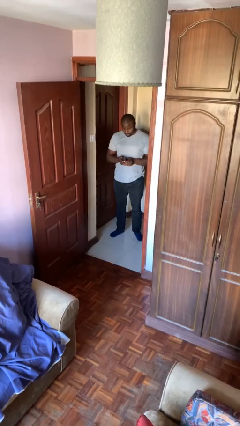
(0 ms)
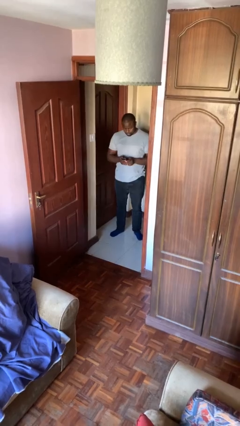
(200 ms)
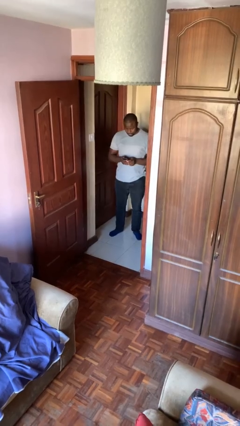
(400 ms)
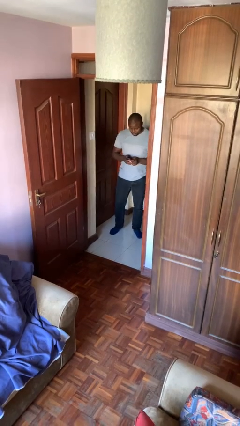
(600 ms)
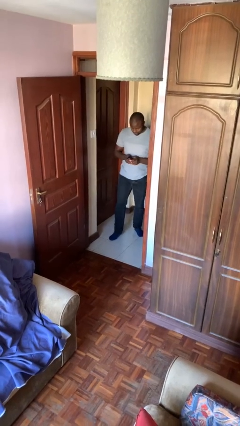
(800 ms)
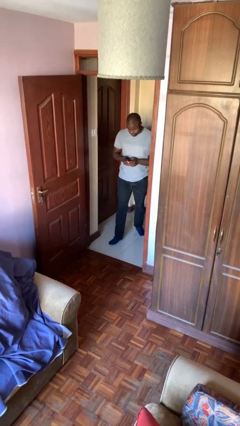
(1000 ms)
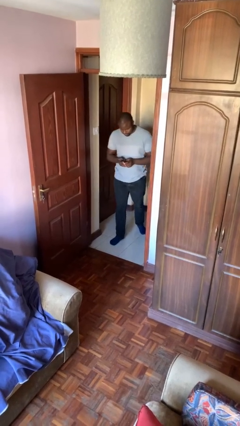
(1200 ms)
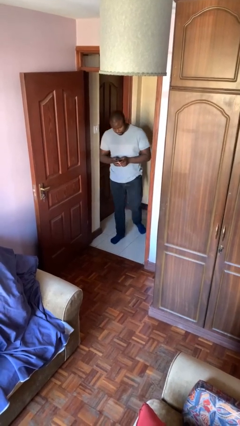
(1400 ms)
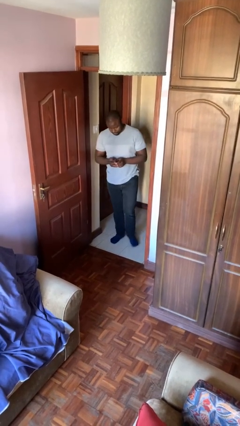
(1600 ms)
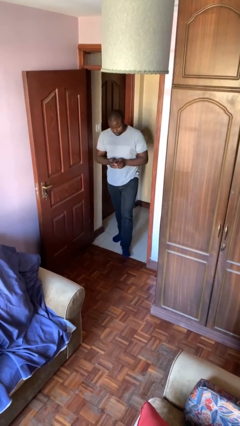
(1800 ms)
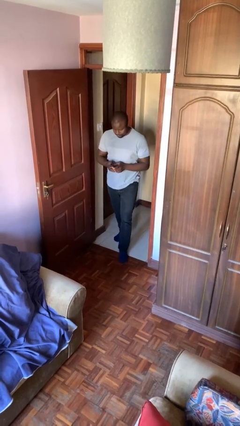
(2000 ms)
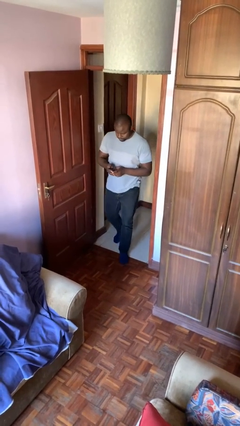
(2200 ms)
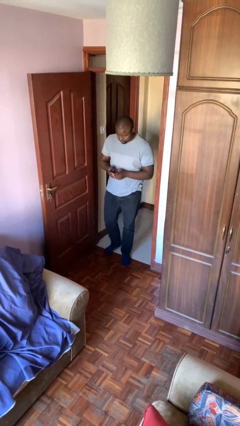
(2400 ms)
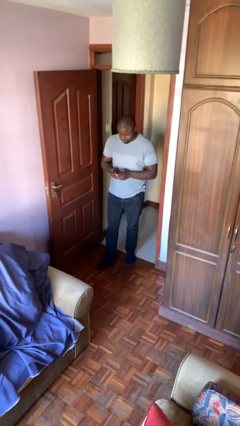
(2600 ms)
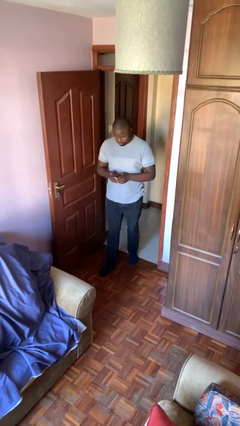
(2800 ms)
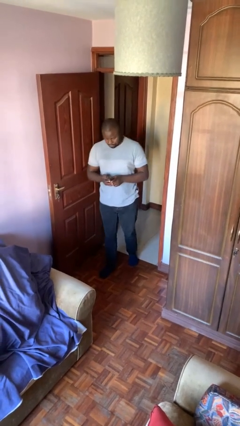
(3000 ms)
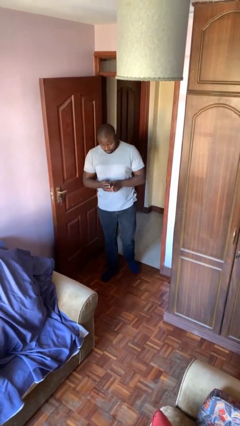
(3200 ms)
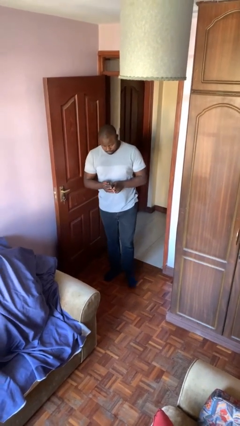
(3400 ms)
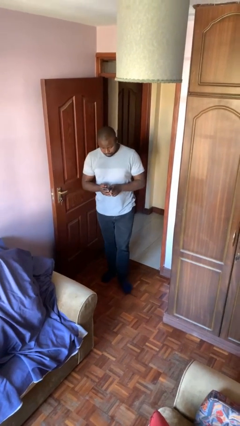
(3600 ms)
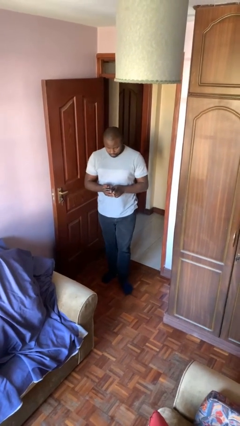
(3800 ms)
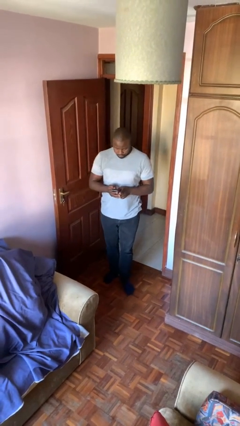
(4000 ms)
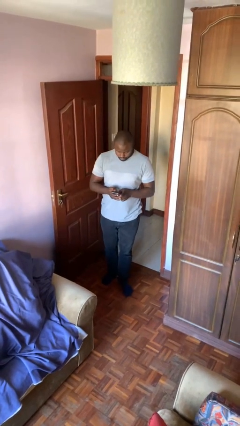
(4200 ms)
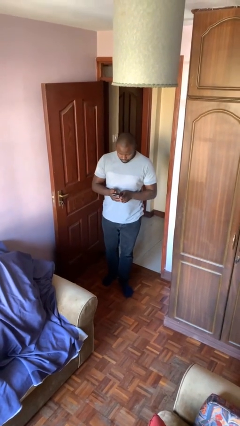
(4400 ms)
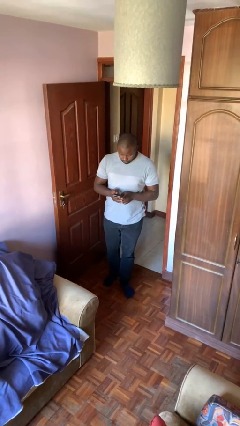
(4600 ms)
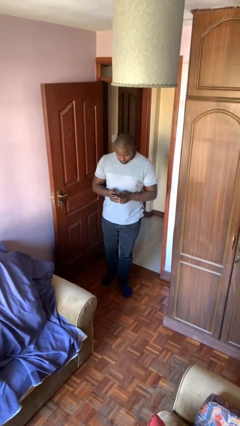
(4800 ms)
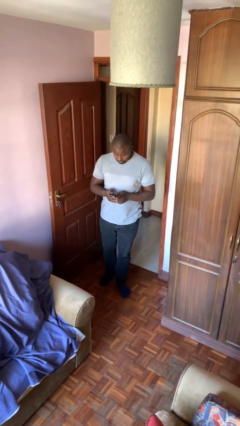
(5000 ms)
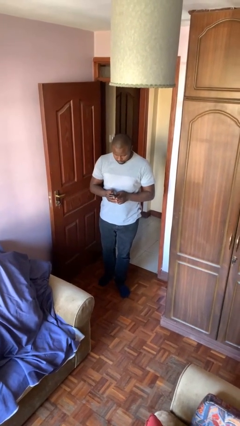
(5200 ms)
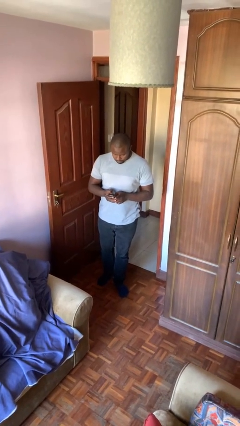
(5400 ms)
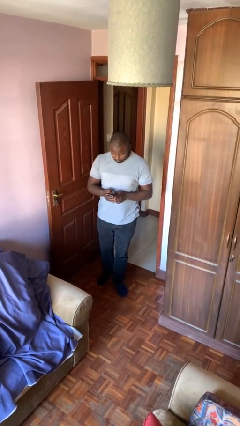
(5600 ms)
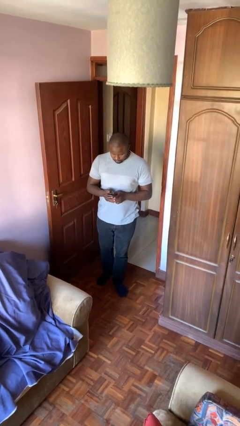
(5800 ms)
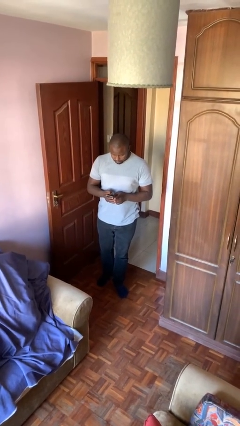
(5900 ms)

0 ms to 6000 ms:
person enters scene through structure

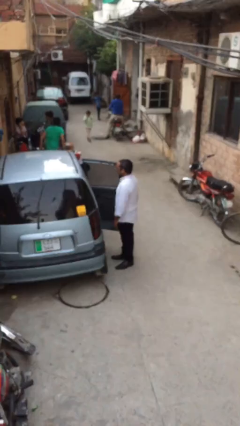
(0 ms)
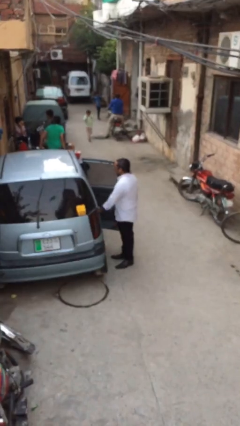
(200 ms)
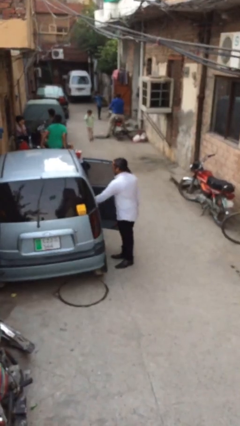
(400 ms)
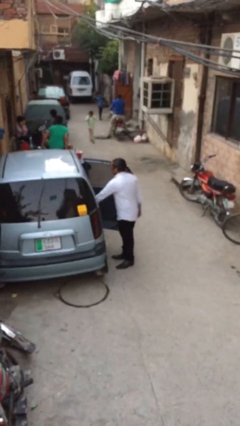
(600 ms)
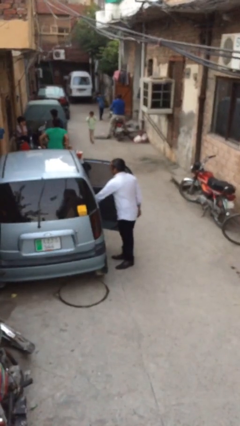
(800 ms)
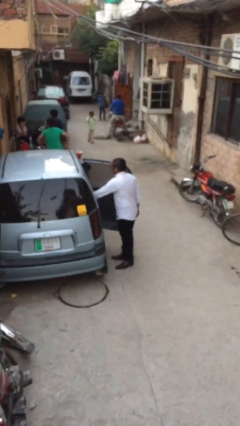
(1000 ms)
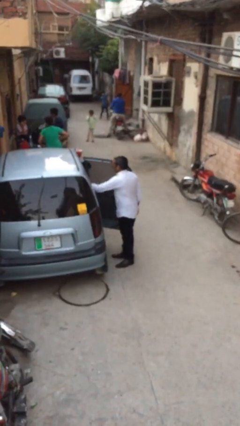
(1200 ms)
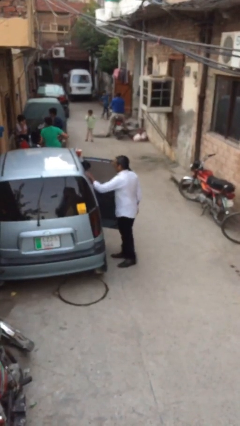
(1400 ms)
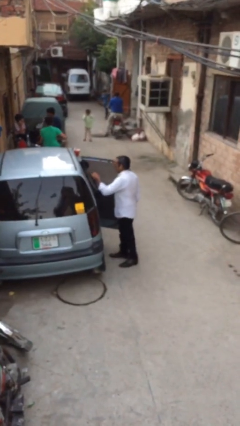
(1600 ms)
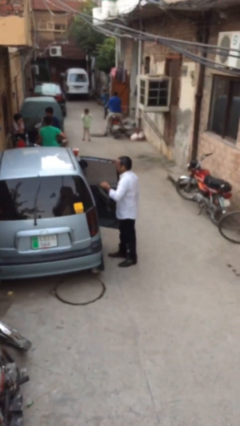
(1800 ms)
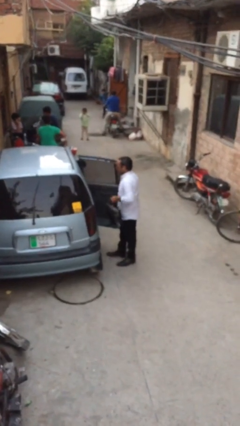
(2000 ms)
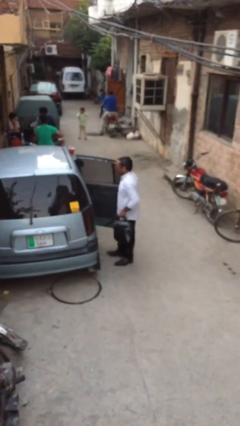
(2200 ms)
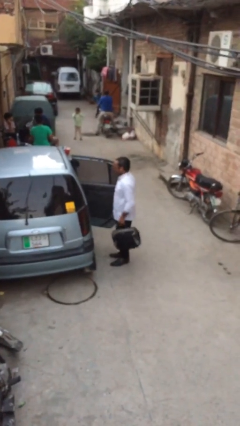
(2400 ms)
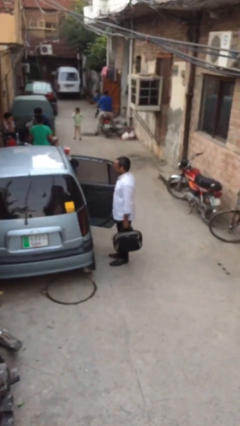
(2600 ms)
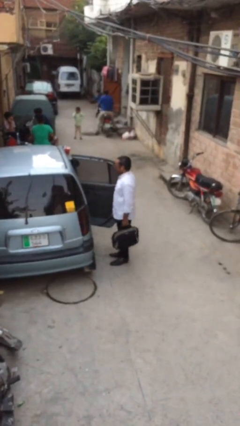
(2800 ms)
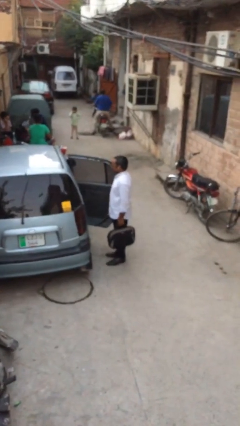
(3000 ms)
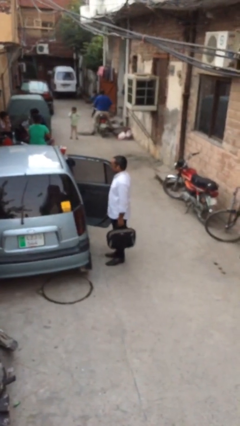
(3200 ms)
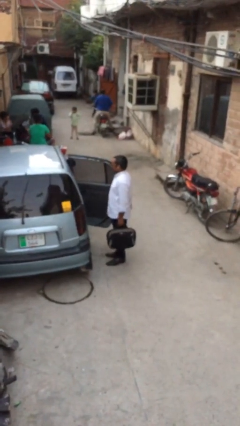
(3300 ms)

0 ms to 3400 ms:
person unloads car

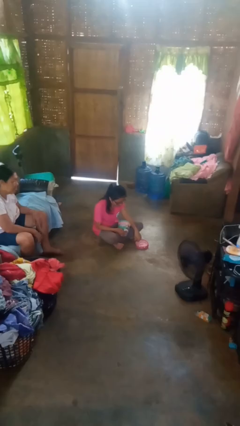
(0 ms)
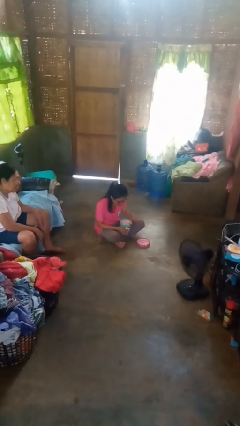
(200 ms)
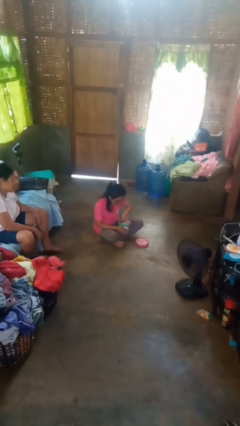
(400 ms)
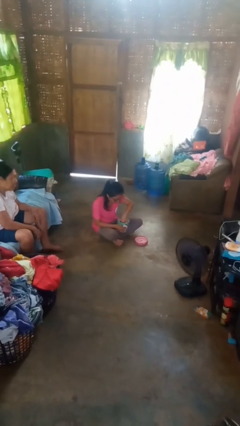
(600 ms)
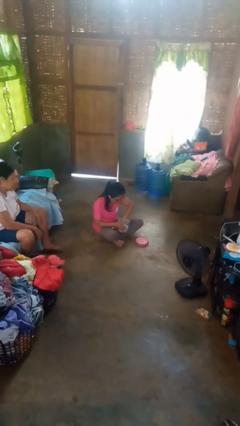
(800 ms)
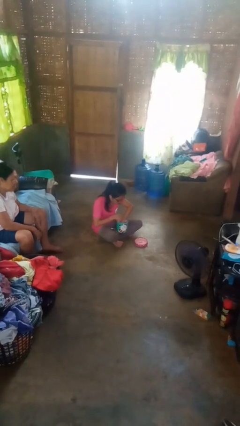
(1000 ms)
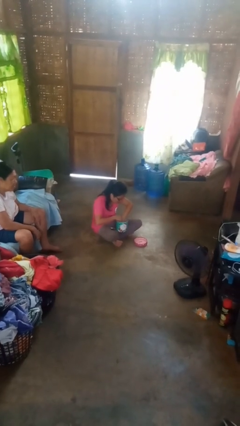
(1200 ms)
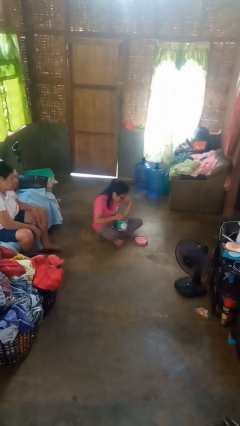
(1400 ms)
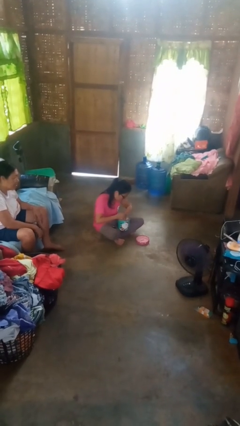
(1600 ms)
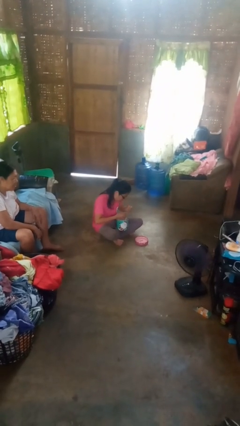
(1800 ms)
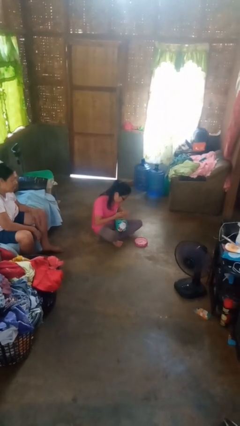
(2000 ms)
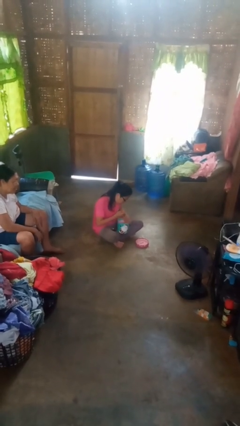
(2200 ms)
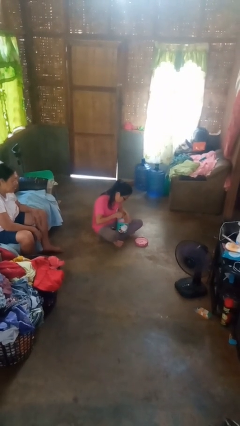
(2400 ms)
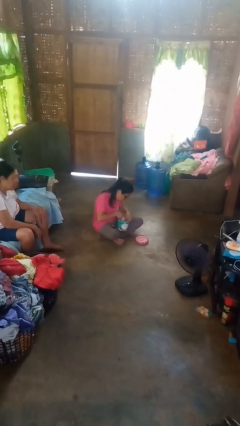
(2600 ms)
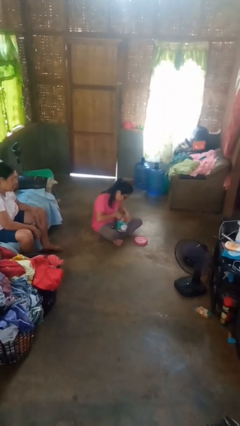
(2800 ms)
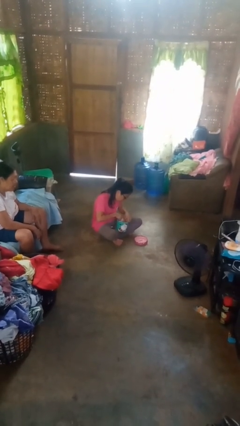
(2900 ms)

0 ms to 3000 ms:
person searches jewelry box

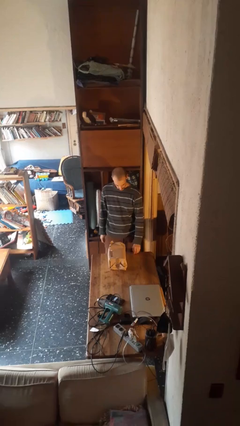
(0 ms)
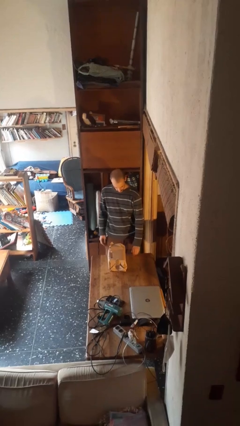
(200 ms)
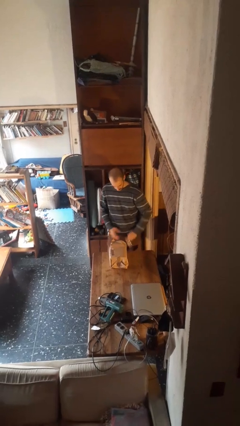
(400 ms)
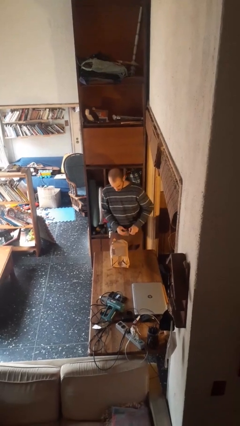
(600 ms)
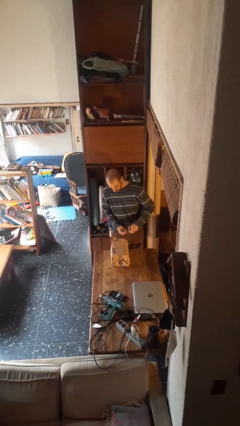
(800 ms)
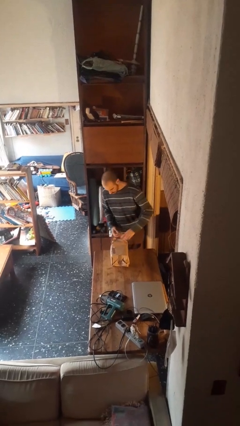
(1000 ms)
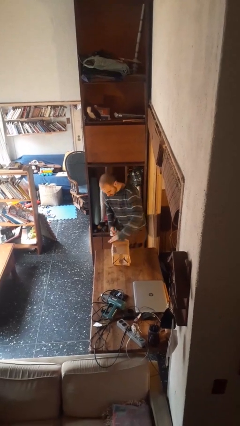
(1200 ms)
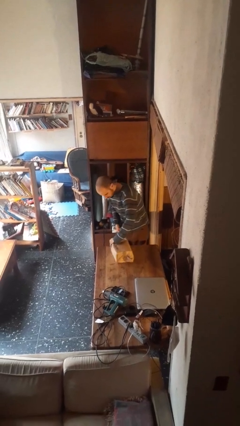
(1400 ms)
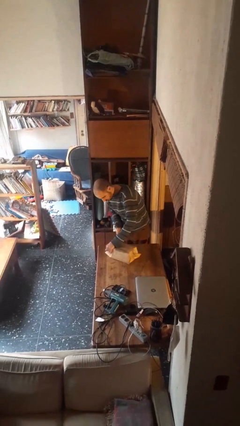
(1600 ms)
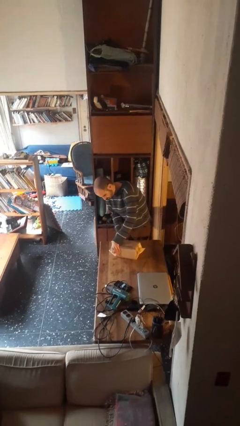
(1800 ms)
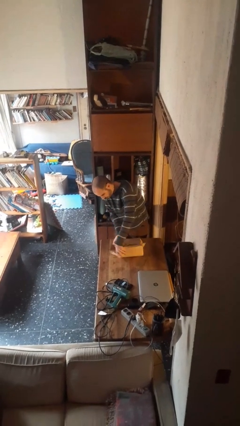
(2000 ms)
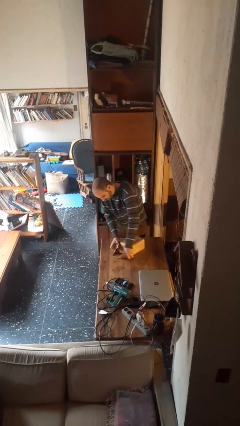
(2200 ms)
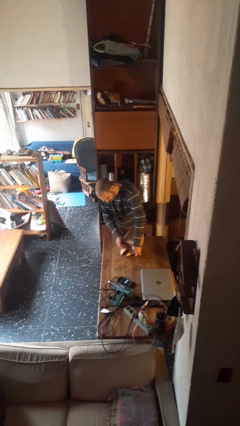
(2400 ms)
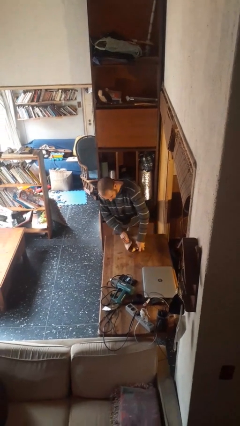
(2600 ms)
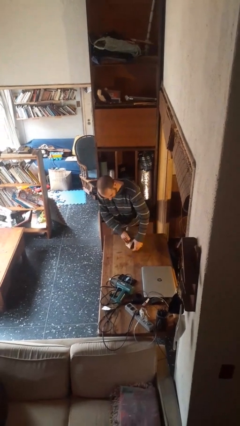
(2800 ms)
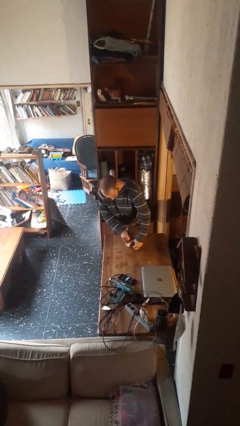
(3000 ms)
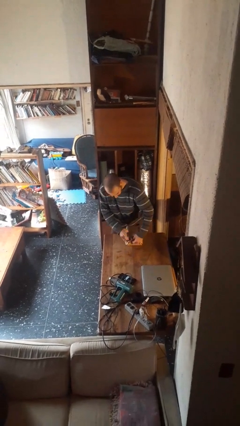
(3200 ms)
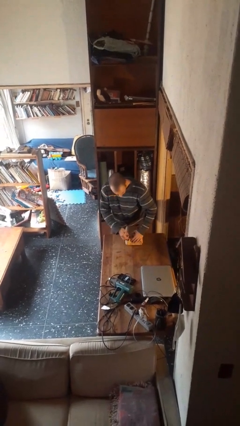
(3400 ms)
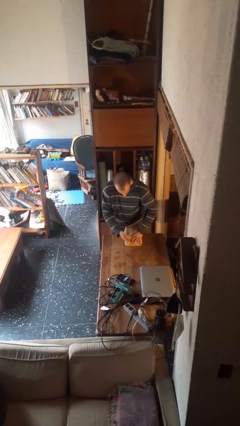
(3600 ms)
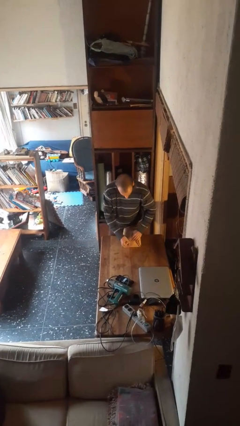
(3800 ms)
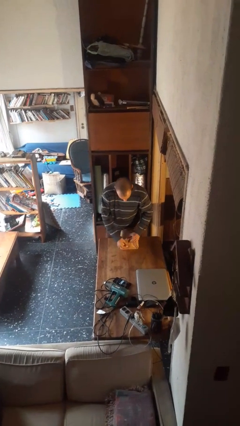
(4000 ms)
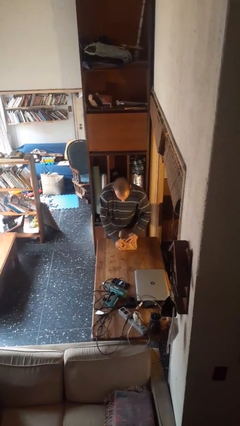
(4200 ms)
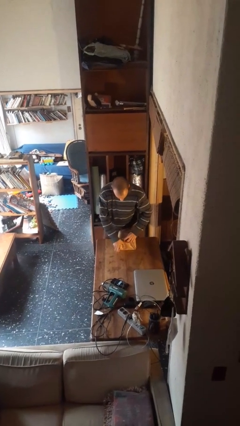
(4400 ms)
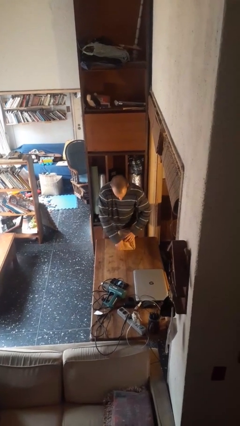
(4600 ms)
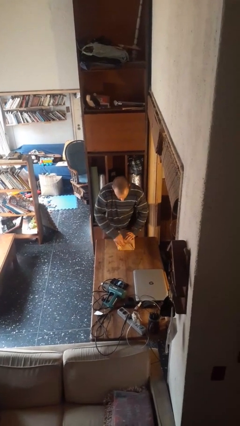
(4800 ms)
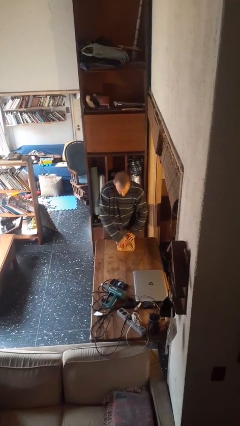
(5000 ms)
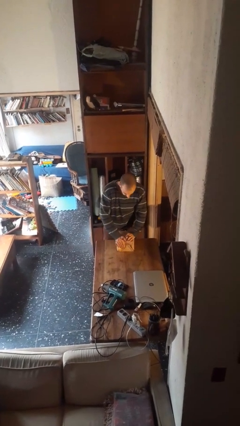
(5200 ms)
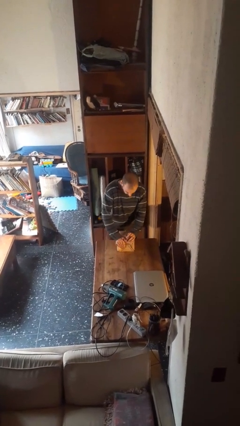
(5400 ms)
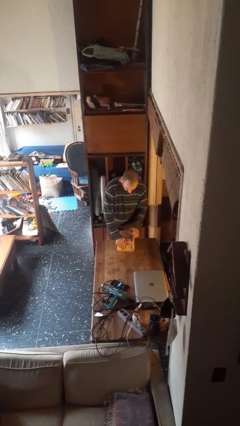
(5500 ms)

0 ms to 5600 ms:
person wraps box
